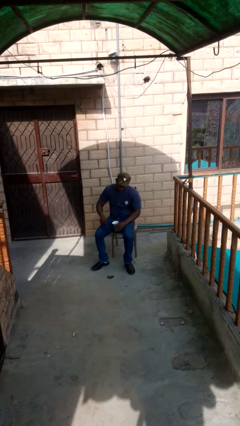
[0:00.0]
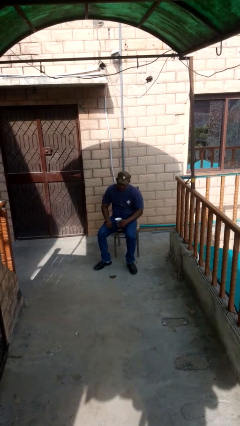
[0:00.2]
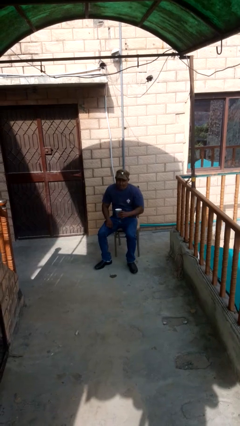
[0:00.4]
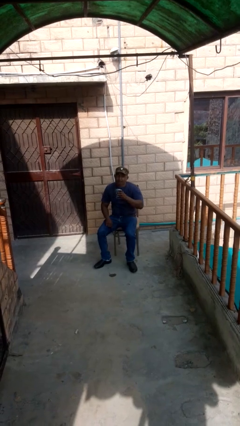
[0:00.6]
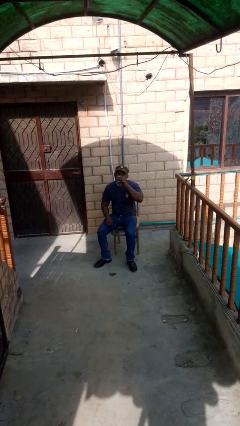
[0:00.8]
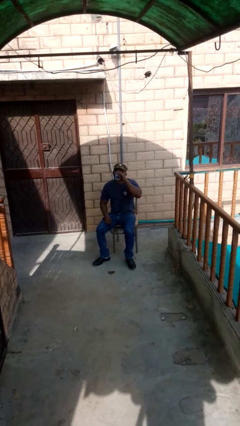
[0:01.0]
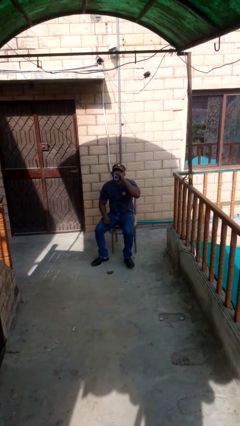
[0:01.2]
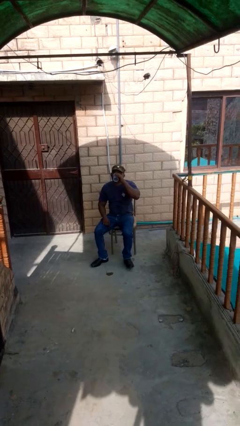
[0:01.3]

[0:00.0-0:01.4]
person drinks from mug

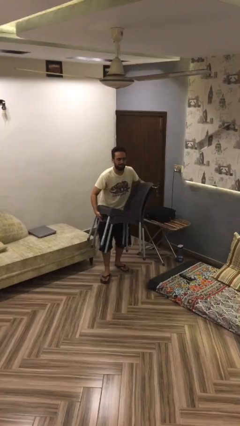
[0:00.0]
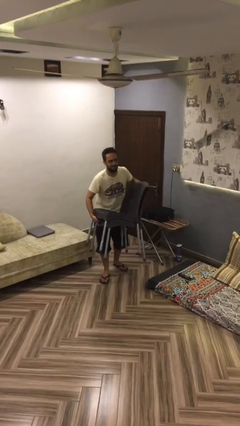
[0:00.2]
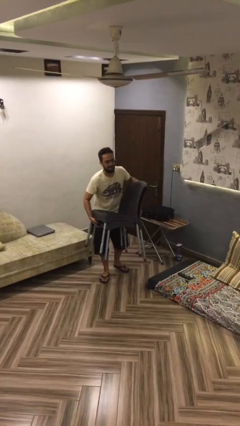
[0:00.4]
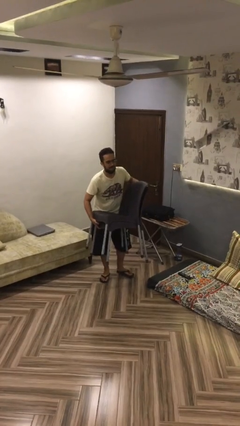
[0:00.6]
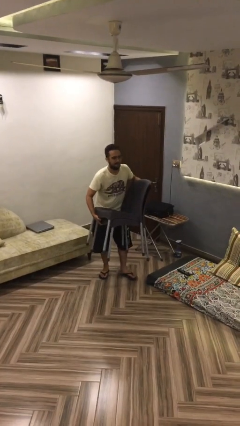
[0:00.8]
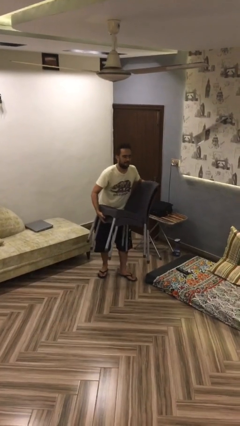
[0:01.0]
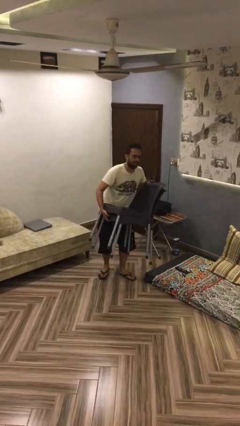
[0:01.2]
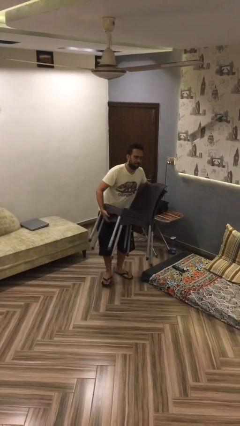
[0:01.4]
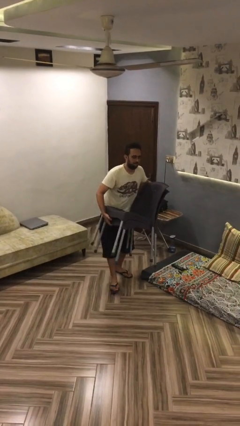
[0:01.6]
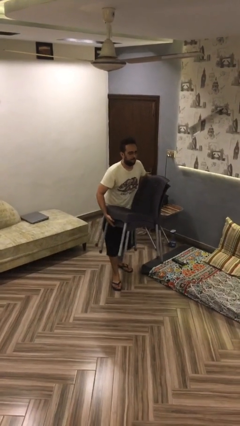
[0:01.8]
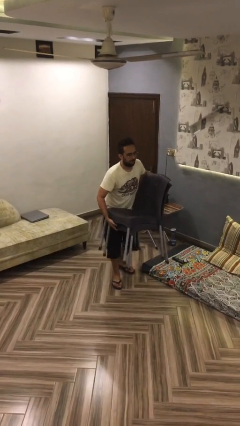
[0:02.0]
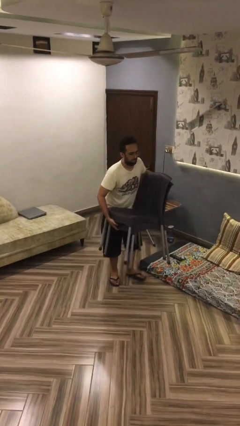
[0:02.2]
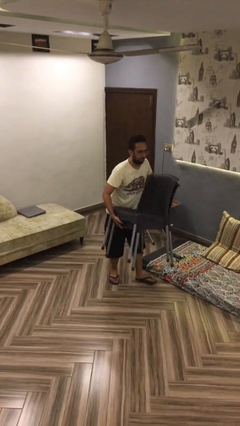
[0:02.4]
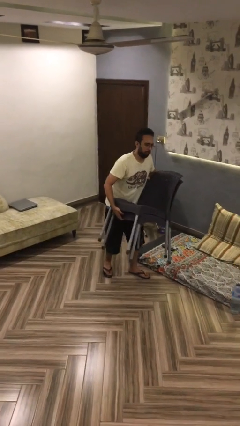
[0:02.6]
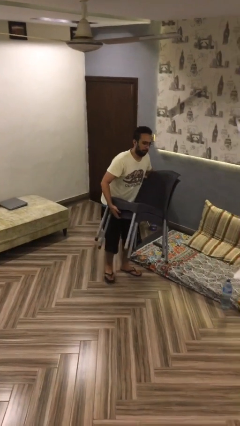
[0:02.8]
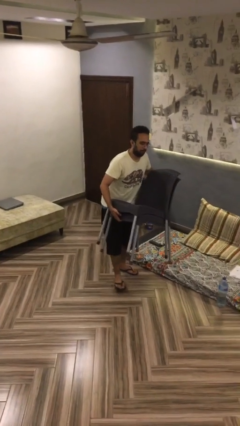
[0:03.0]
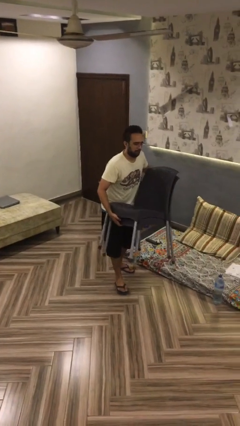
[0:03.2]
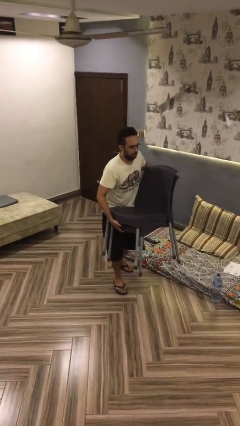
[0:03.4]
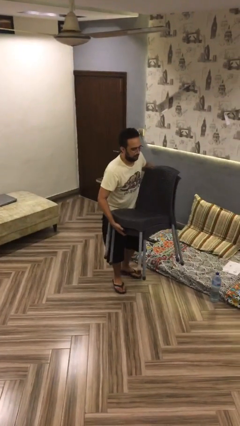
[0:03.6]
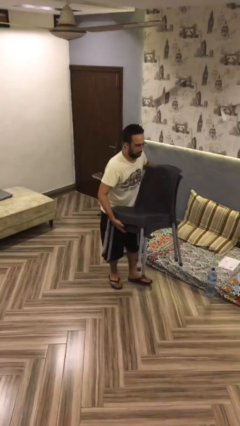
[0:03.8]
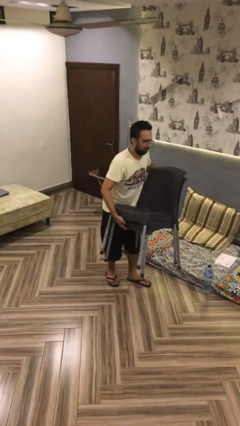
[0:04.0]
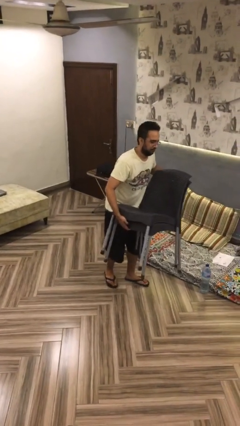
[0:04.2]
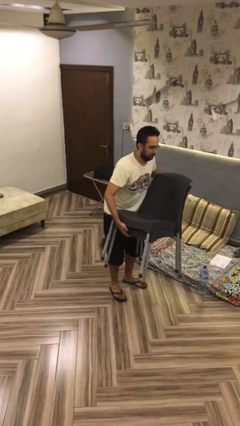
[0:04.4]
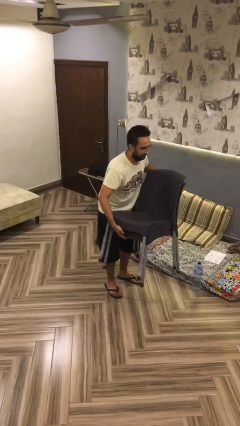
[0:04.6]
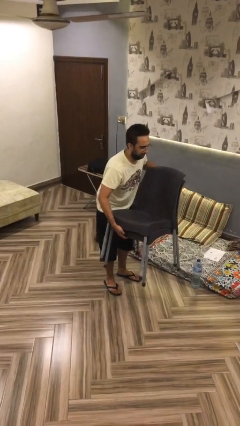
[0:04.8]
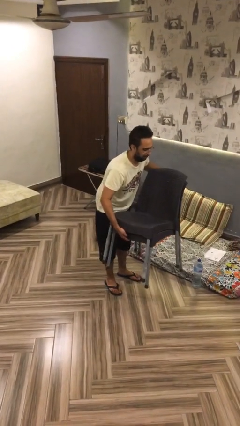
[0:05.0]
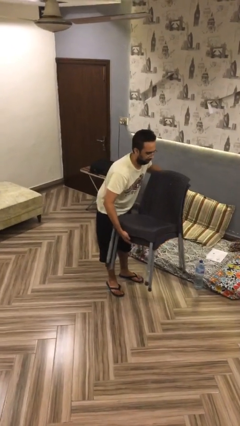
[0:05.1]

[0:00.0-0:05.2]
person carries heavy object

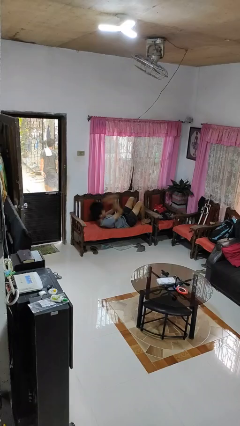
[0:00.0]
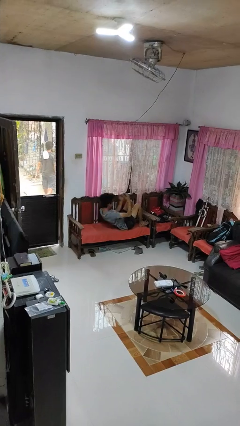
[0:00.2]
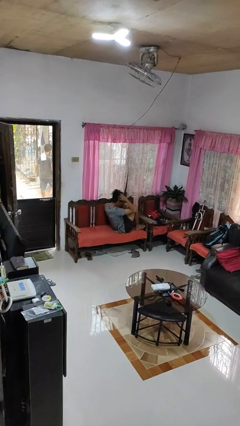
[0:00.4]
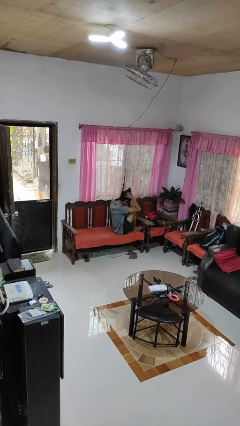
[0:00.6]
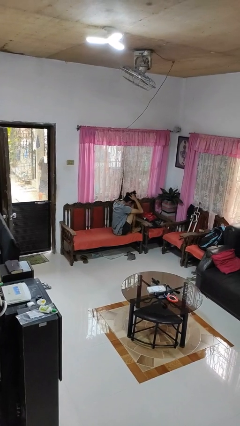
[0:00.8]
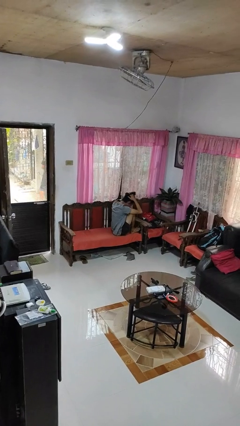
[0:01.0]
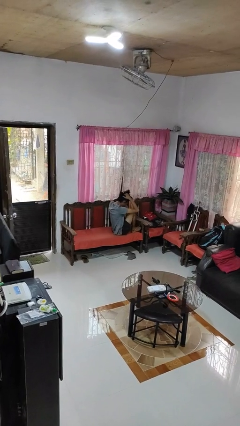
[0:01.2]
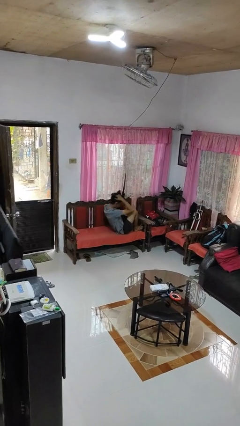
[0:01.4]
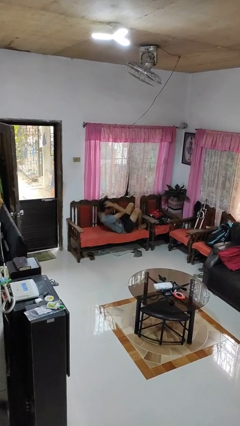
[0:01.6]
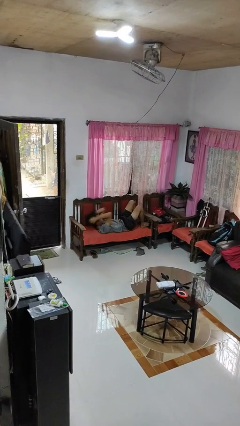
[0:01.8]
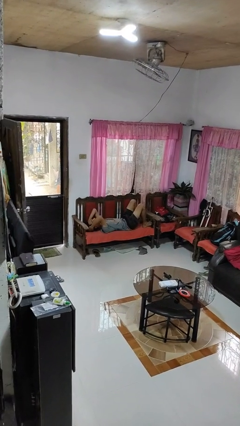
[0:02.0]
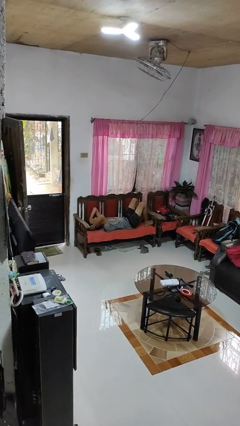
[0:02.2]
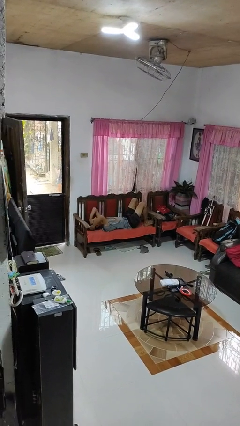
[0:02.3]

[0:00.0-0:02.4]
person exercises with situp

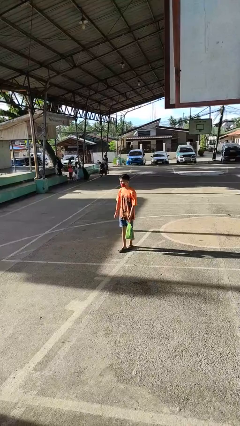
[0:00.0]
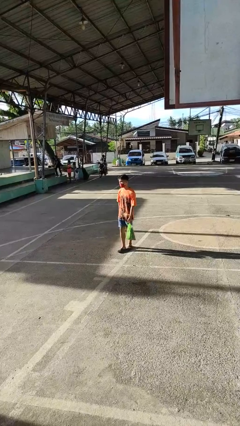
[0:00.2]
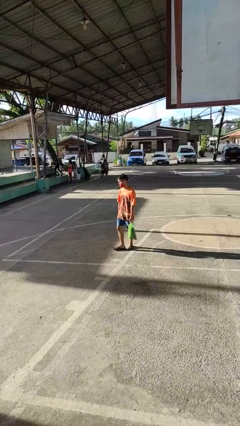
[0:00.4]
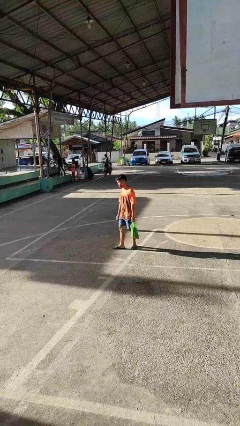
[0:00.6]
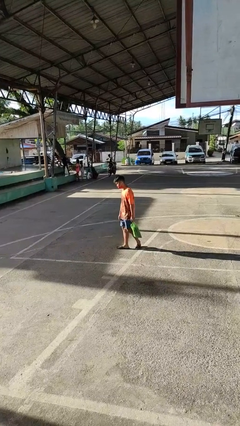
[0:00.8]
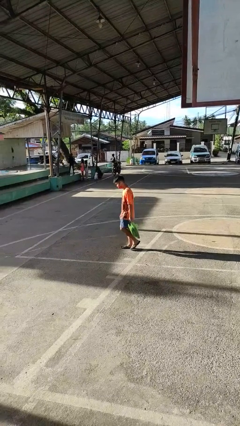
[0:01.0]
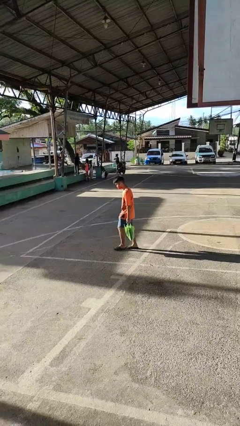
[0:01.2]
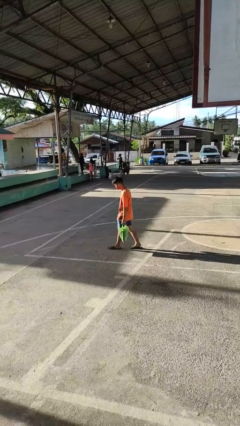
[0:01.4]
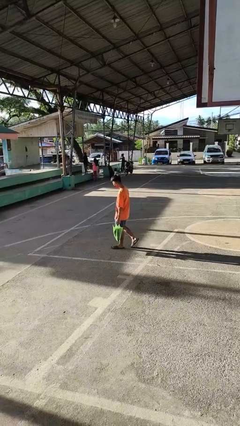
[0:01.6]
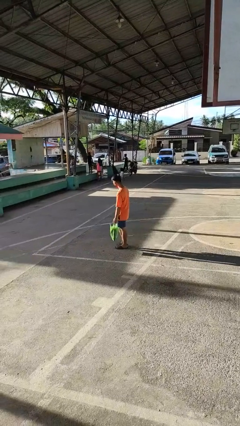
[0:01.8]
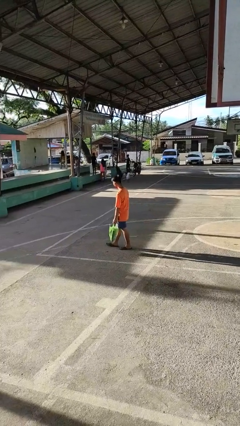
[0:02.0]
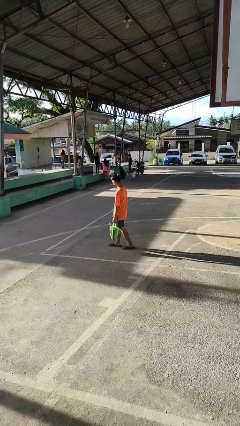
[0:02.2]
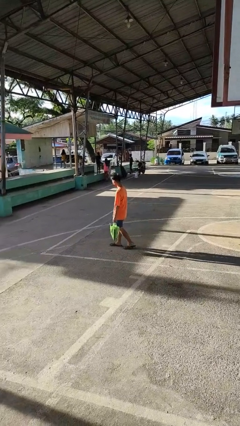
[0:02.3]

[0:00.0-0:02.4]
person carries groceries

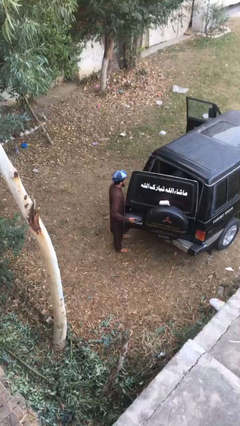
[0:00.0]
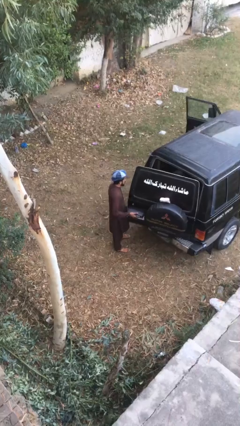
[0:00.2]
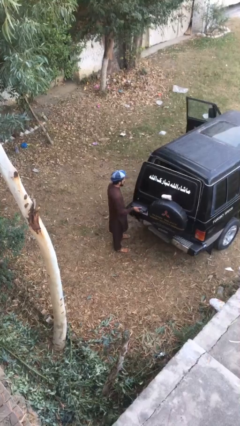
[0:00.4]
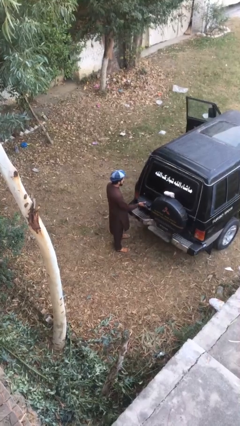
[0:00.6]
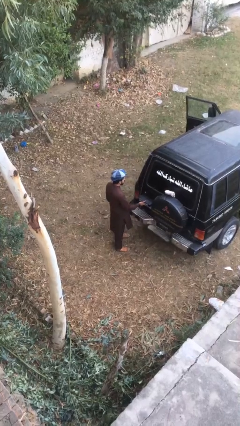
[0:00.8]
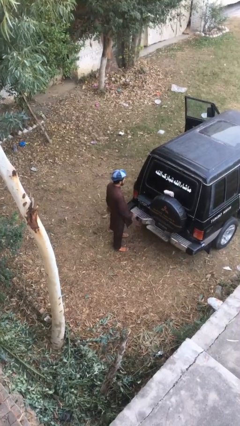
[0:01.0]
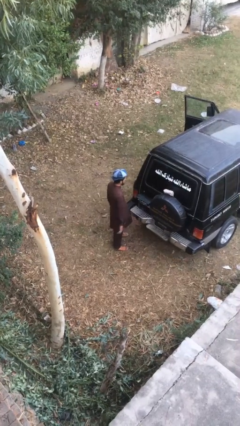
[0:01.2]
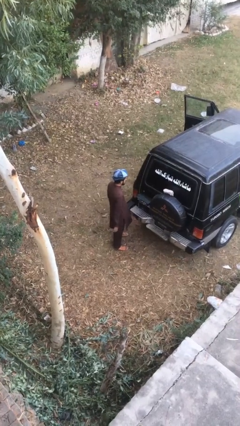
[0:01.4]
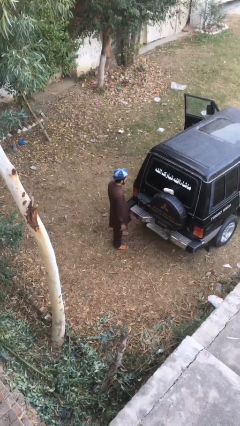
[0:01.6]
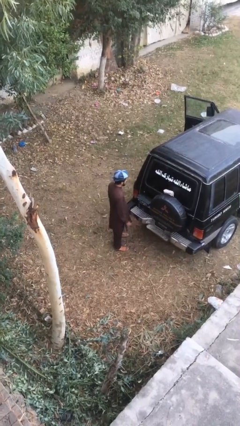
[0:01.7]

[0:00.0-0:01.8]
person closes car trunk

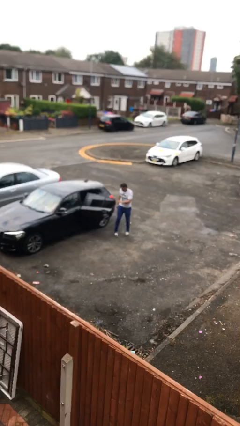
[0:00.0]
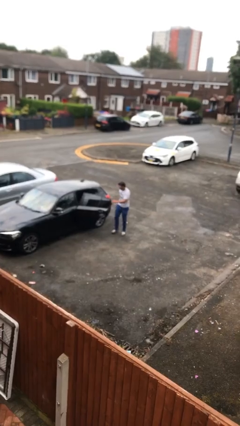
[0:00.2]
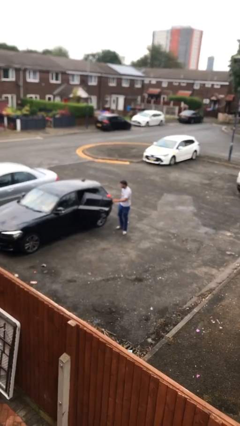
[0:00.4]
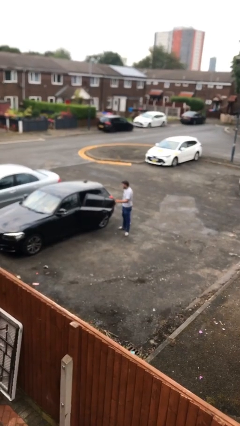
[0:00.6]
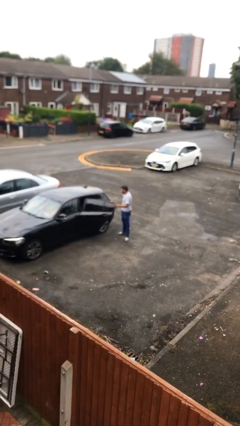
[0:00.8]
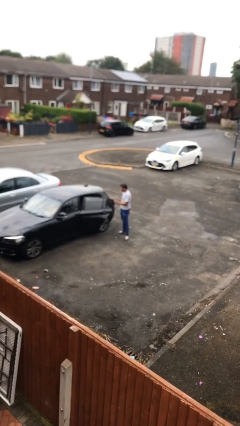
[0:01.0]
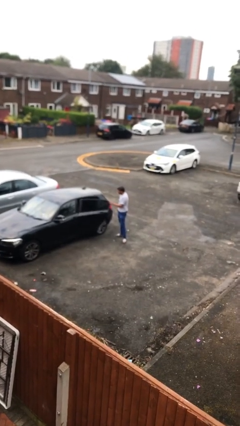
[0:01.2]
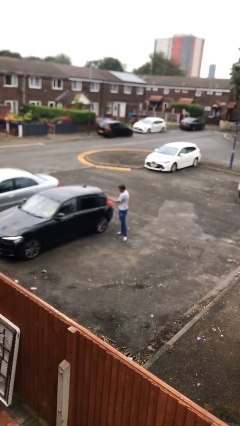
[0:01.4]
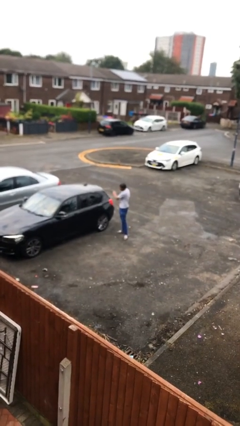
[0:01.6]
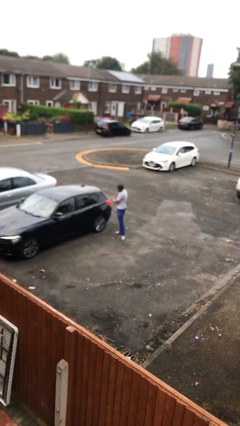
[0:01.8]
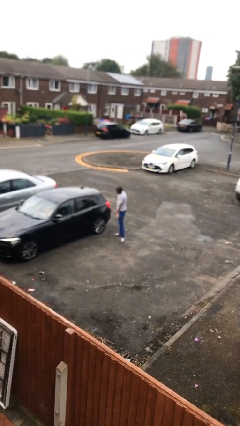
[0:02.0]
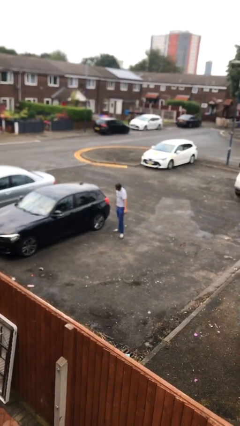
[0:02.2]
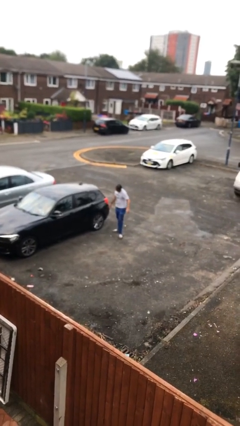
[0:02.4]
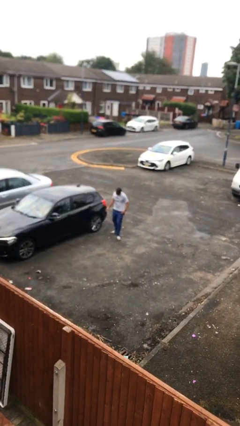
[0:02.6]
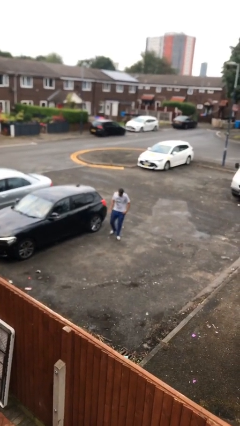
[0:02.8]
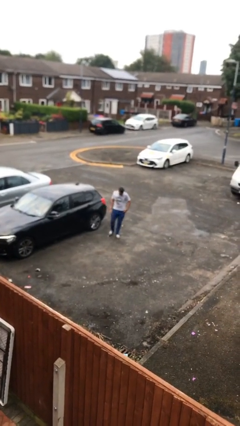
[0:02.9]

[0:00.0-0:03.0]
person closes car door

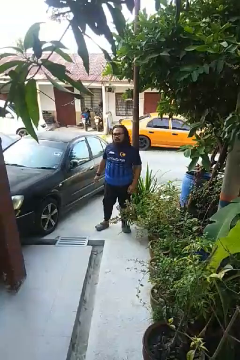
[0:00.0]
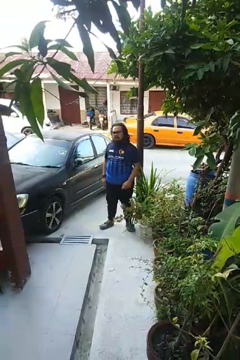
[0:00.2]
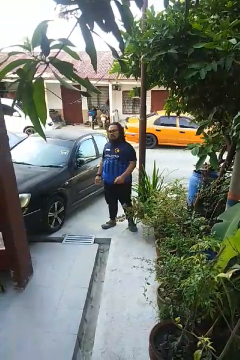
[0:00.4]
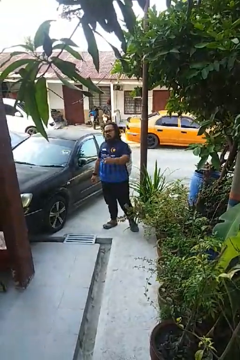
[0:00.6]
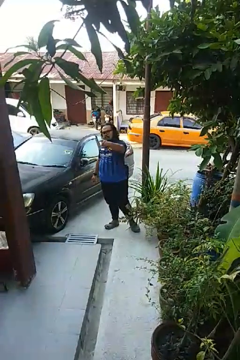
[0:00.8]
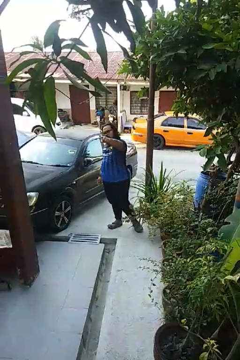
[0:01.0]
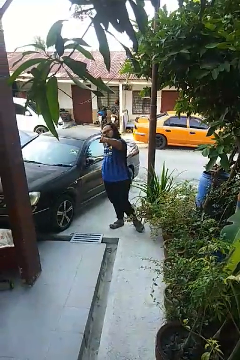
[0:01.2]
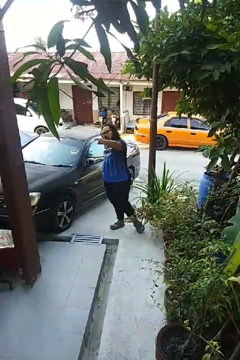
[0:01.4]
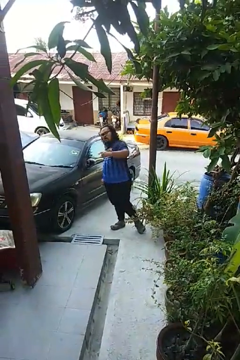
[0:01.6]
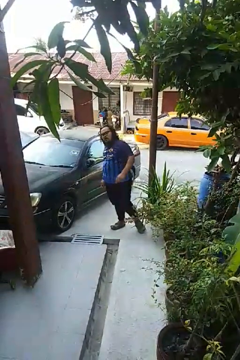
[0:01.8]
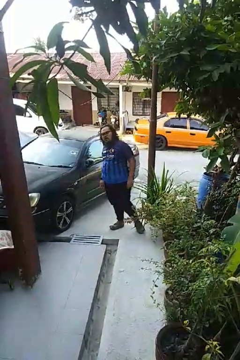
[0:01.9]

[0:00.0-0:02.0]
person points at person
